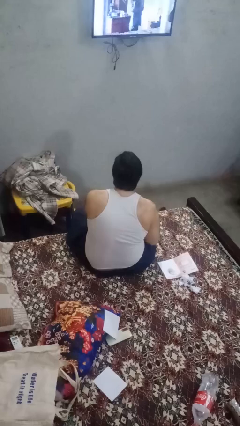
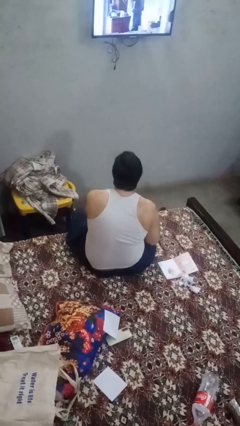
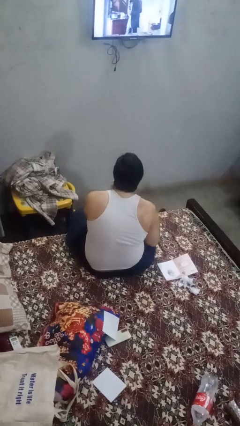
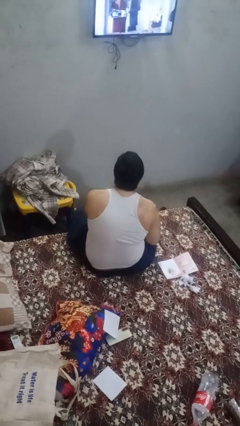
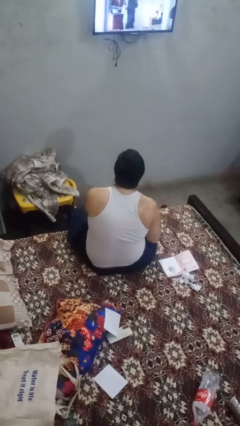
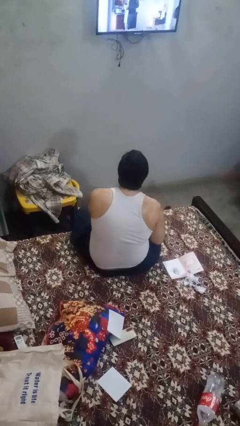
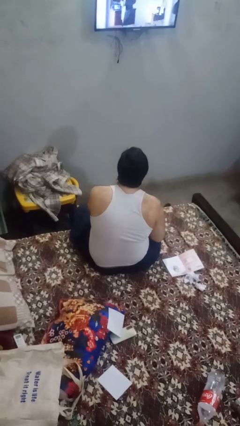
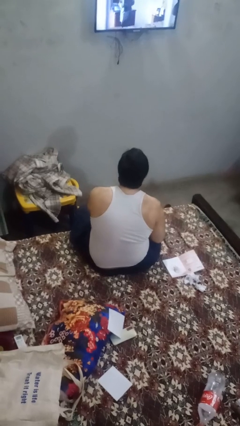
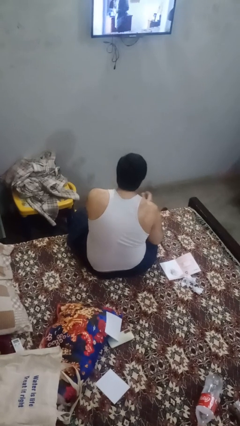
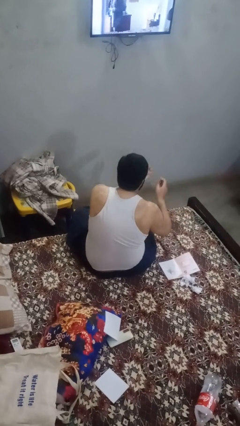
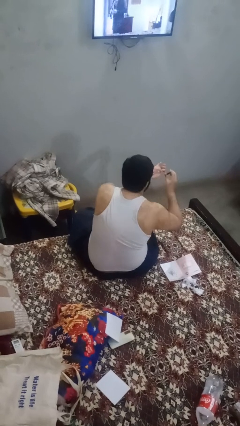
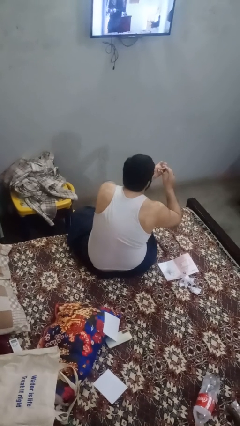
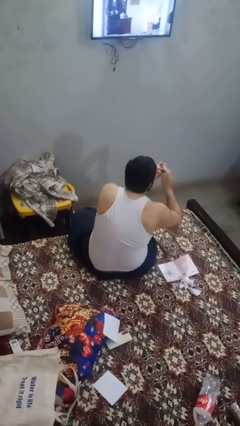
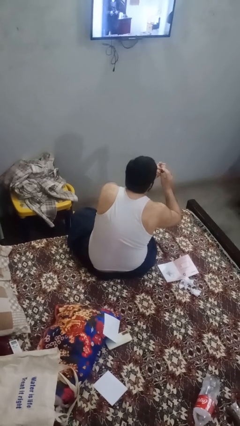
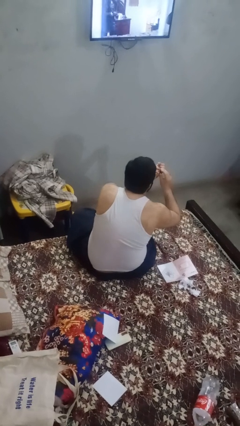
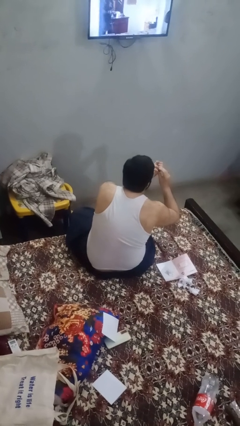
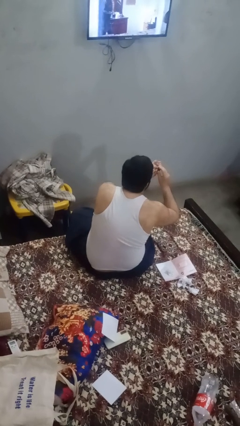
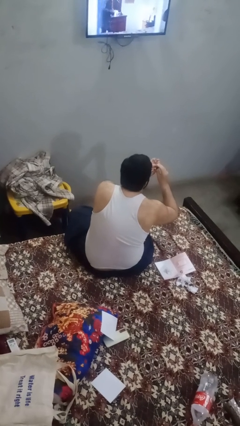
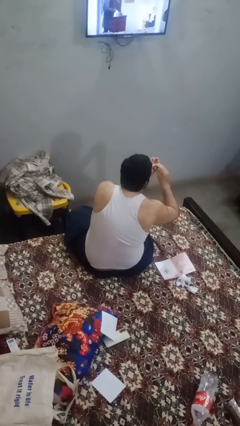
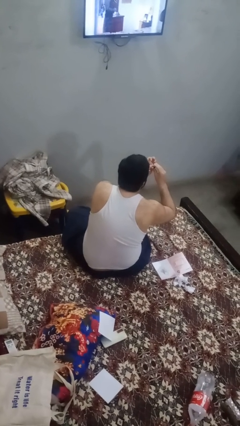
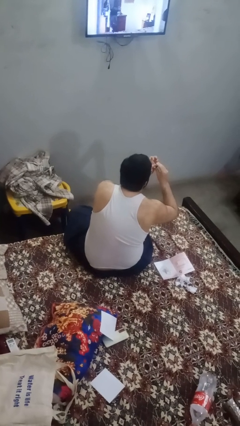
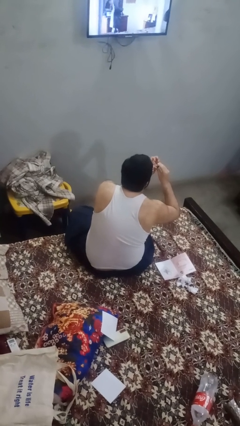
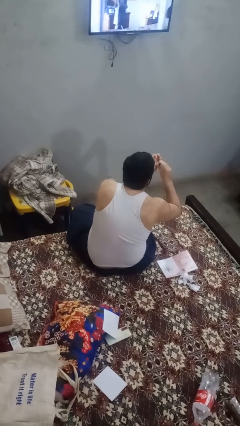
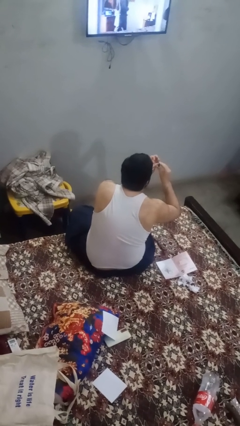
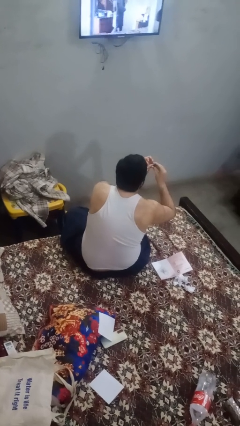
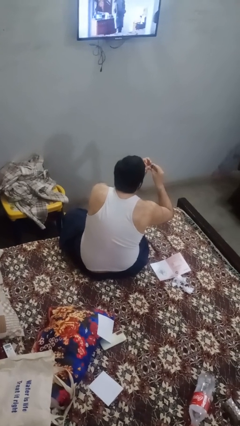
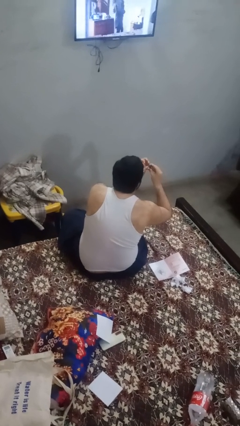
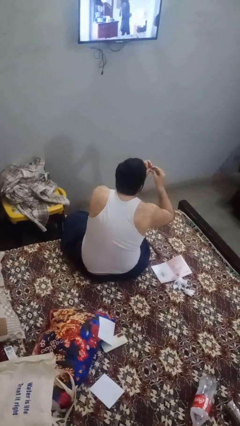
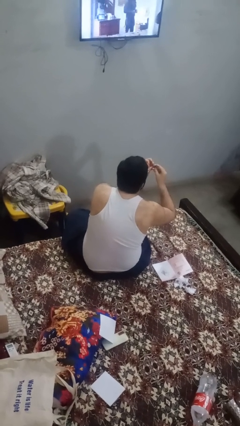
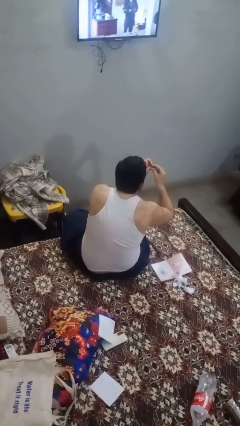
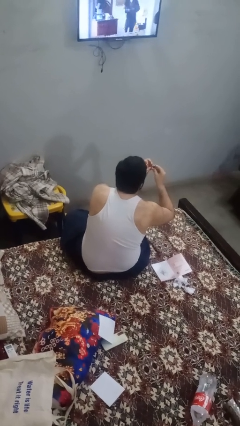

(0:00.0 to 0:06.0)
person clips fingernails

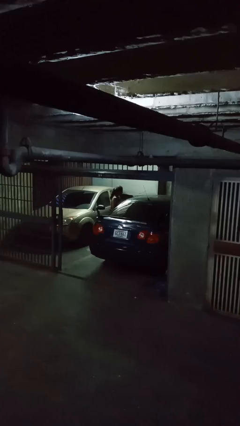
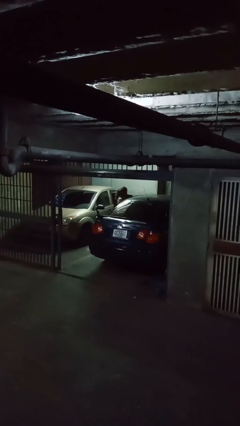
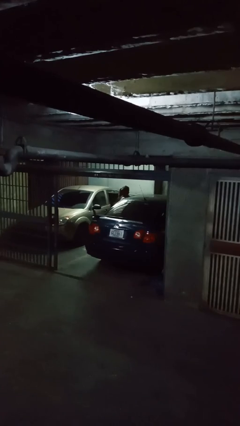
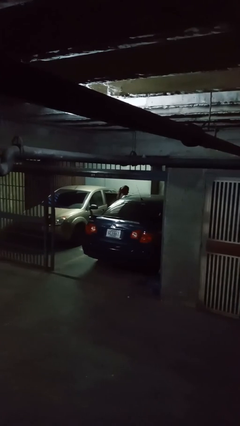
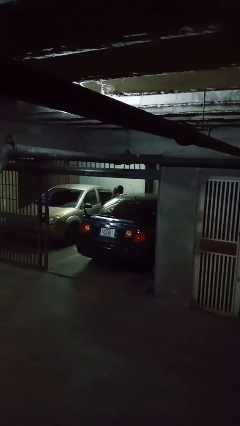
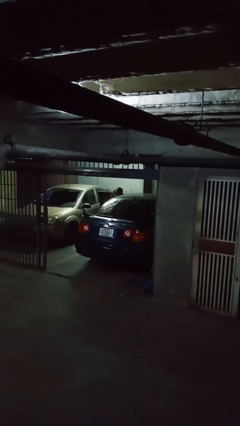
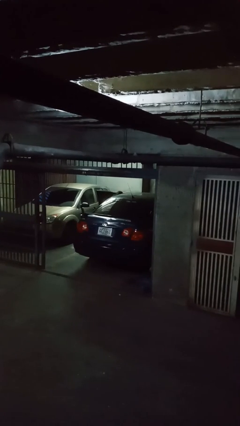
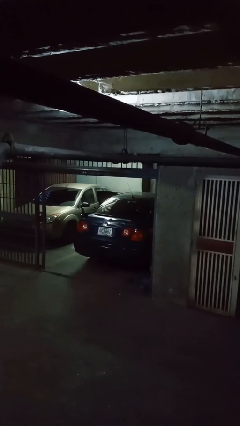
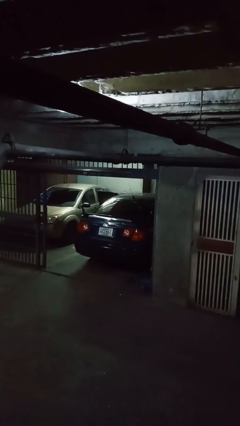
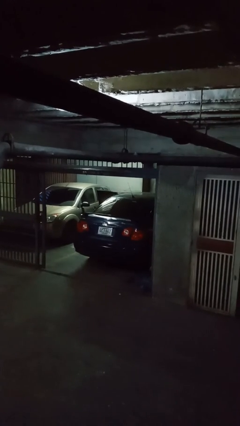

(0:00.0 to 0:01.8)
person enters car

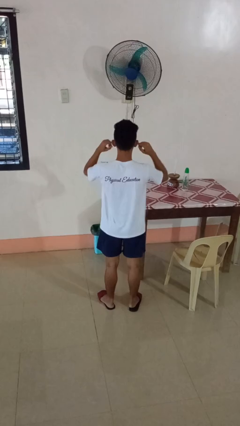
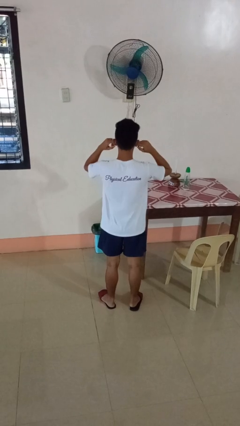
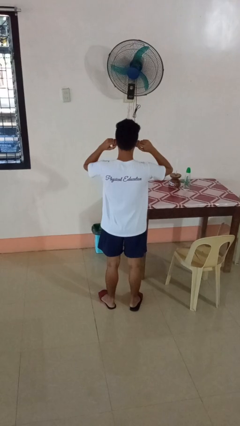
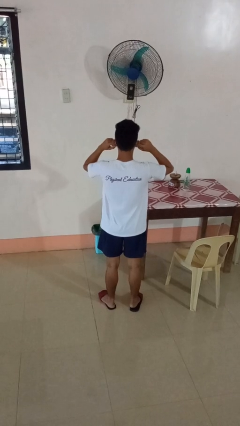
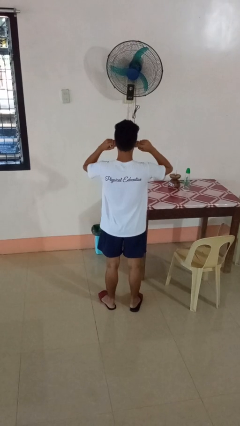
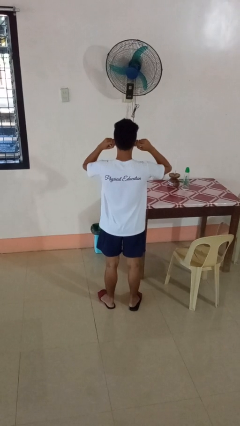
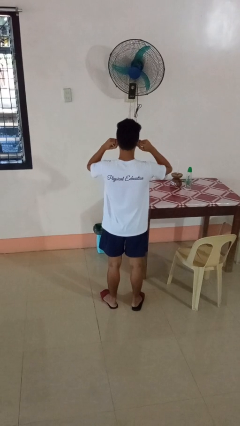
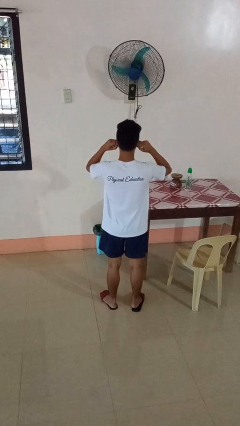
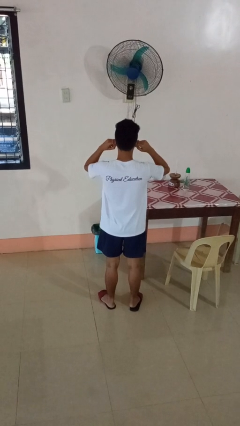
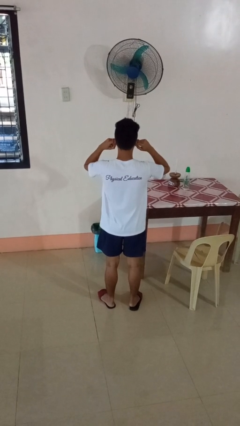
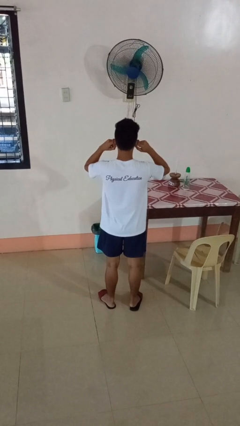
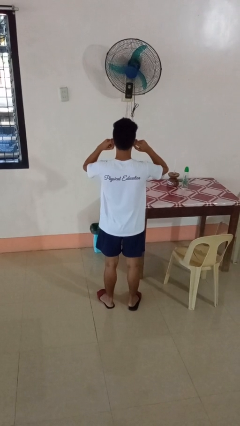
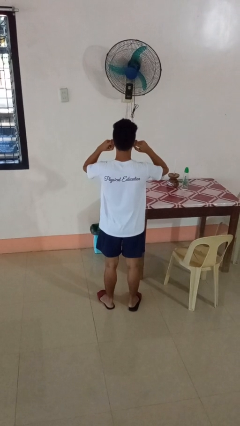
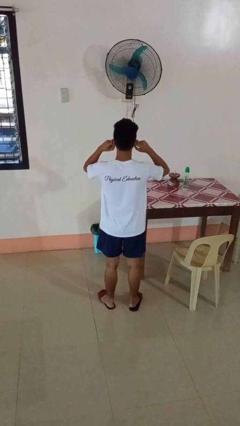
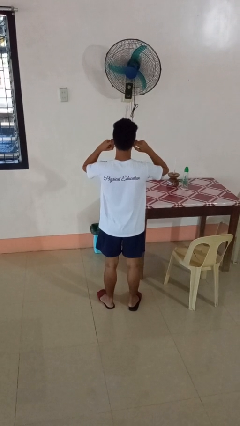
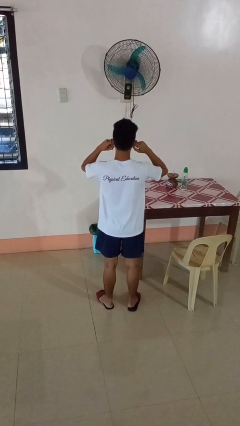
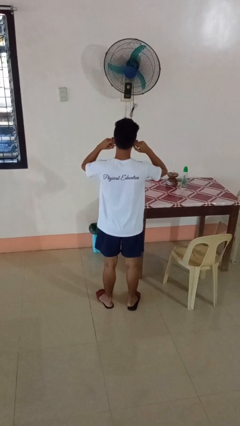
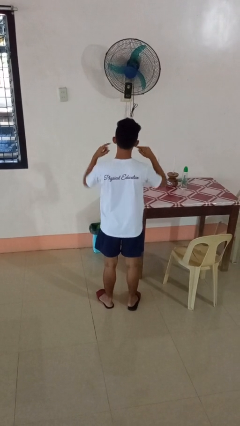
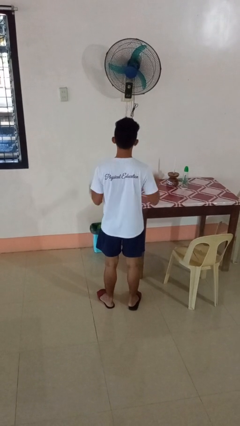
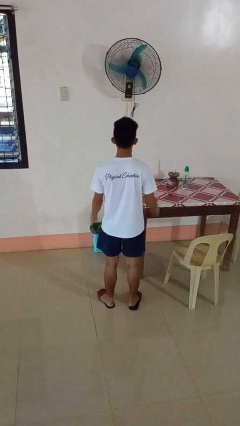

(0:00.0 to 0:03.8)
person puts fingers in ear

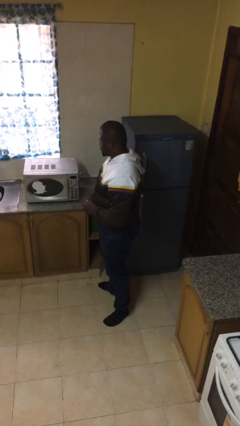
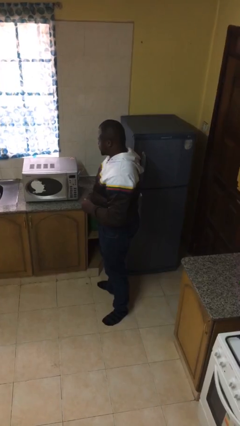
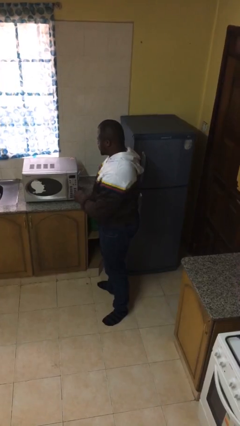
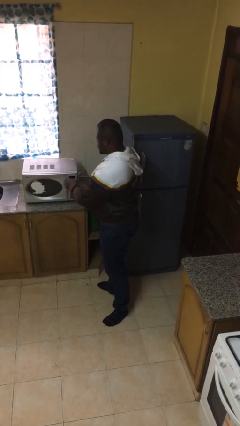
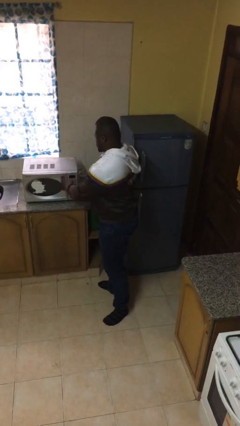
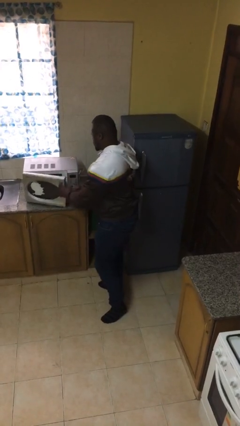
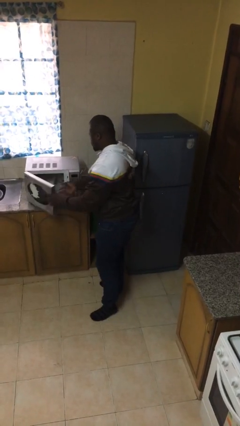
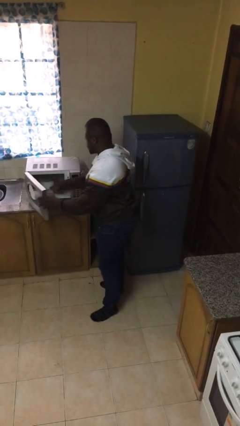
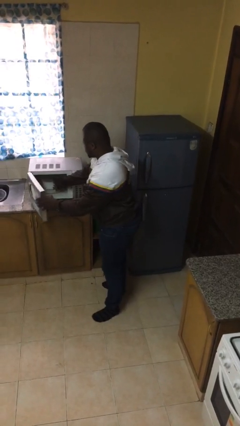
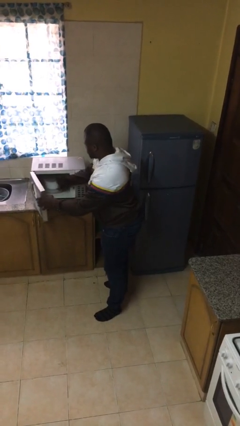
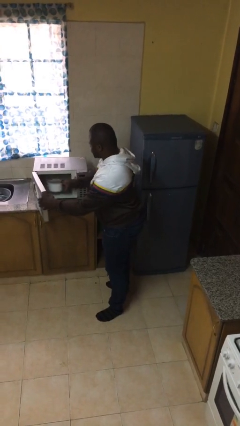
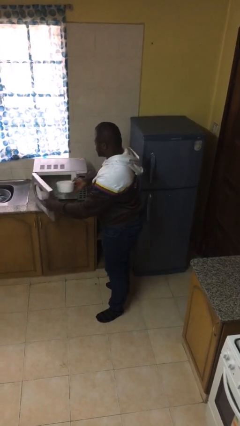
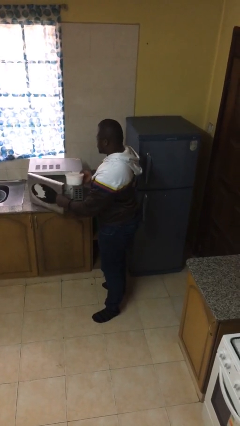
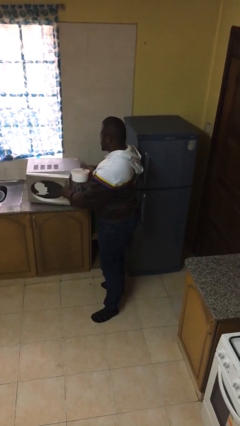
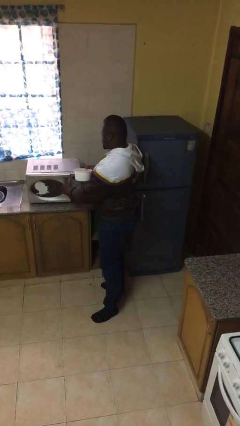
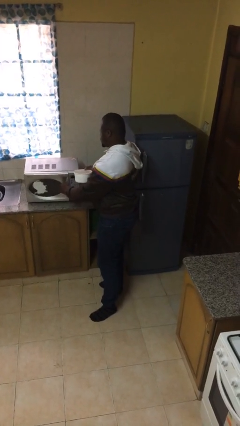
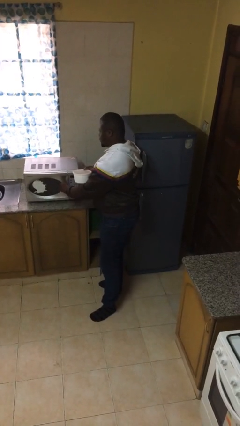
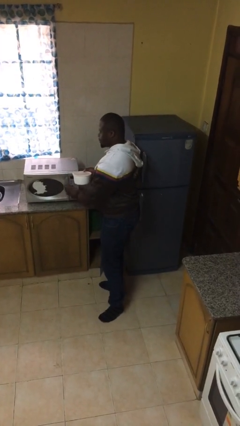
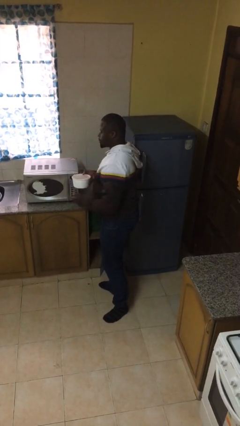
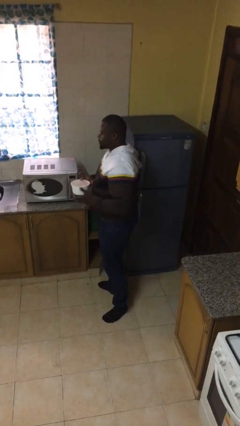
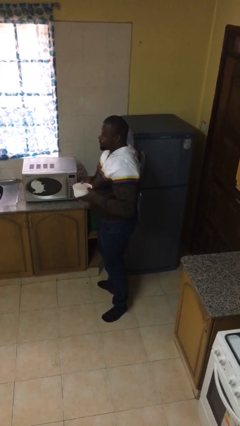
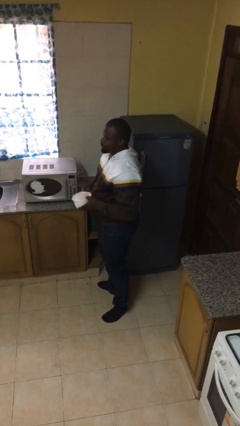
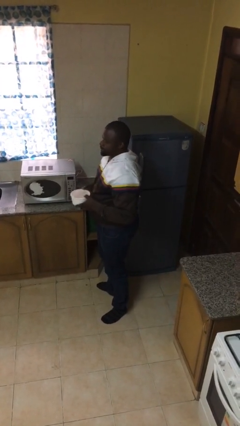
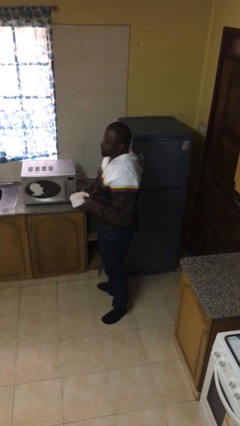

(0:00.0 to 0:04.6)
person takes object from microwave

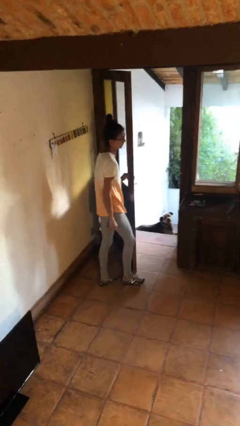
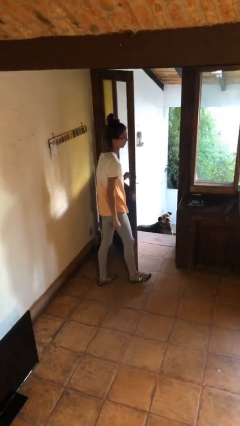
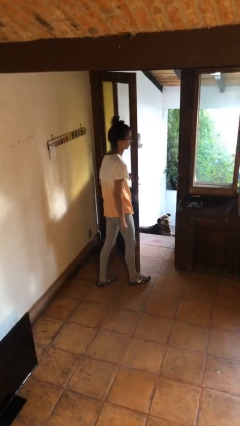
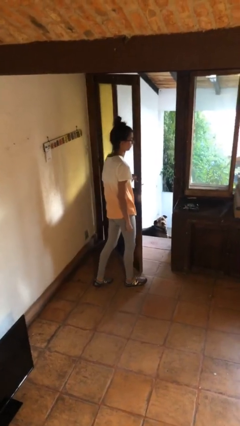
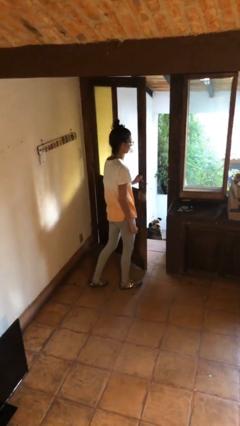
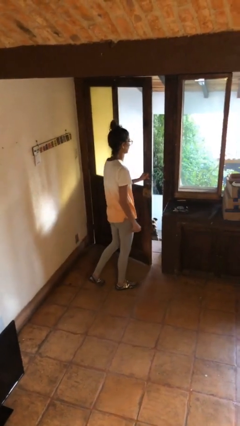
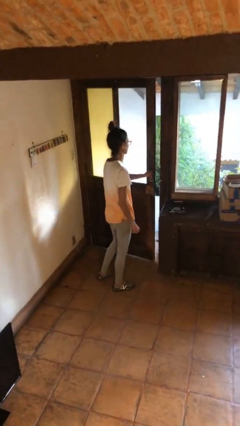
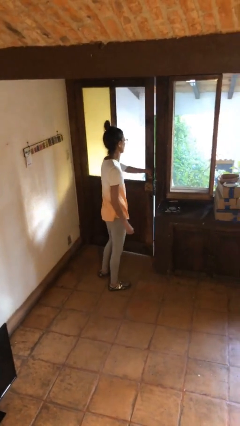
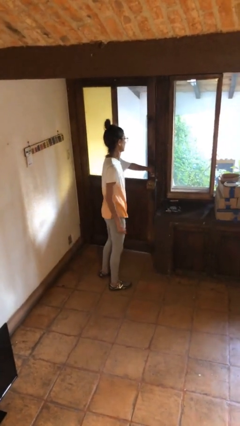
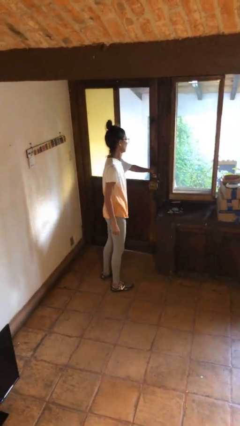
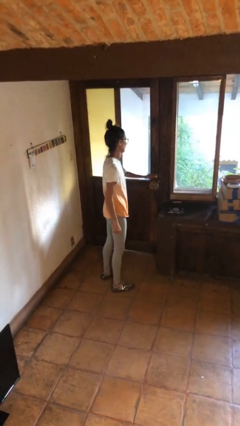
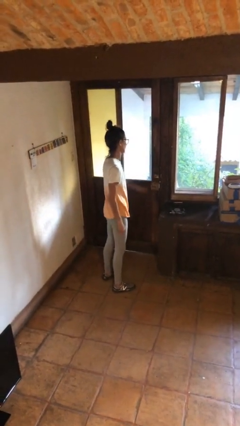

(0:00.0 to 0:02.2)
person closes facility door
